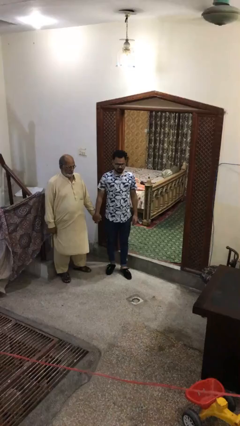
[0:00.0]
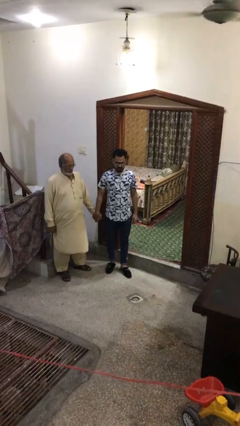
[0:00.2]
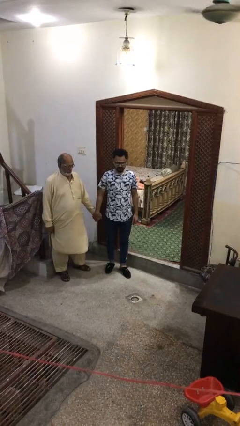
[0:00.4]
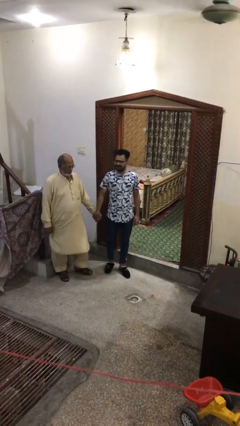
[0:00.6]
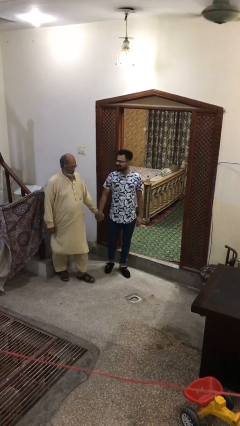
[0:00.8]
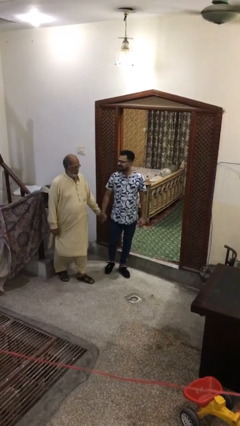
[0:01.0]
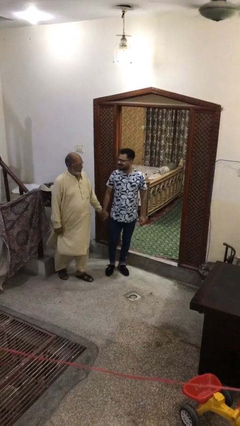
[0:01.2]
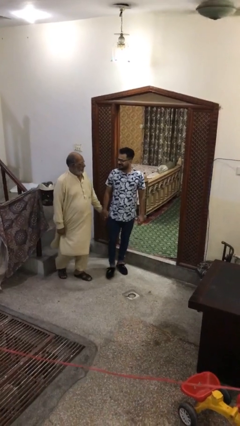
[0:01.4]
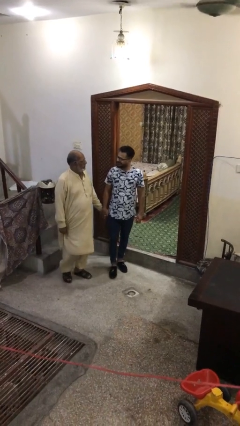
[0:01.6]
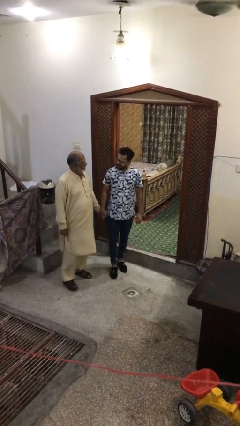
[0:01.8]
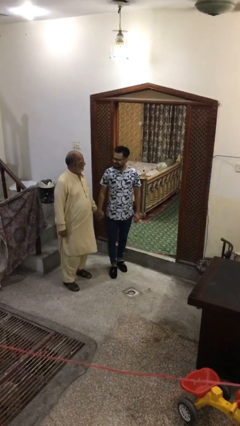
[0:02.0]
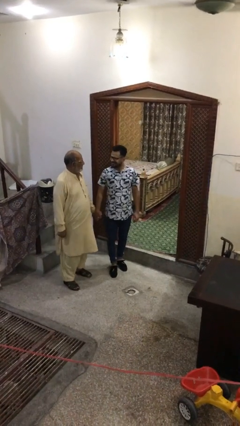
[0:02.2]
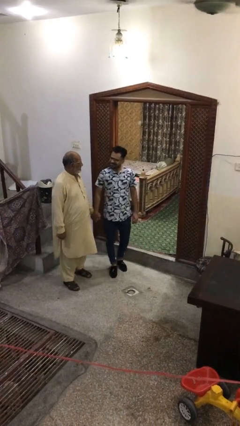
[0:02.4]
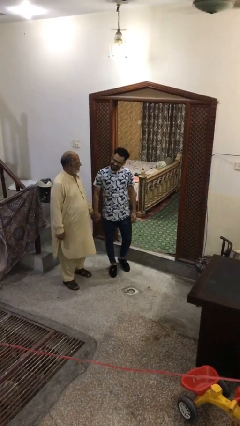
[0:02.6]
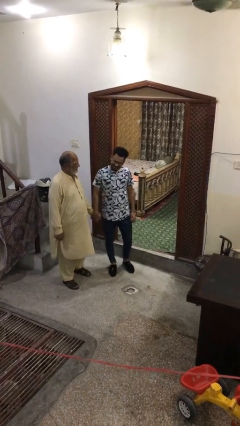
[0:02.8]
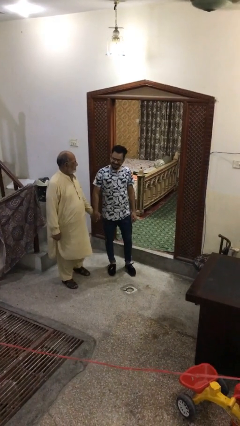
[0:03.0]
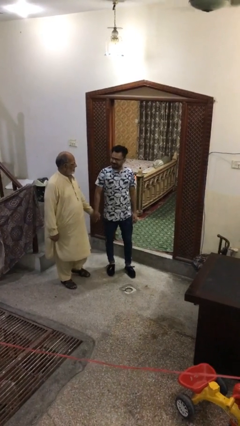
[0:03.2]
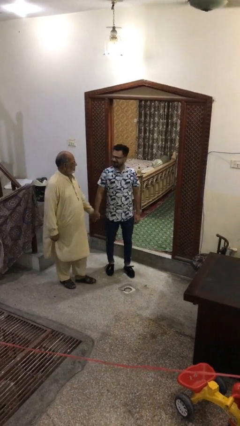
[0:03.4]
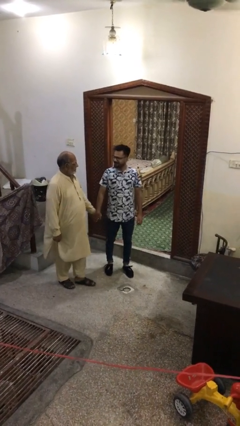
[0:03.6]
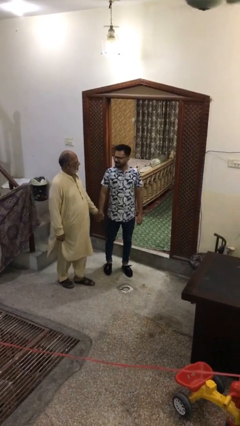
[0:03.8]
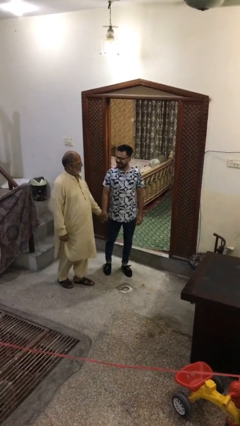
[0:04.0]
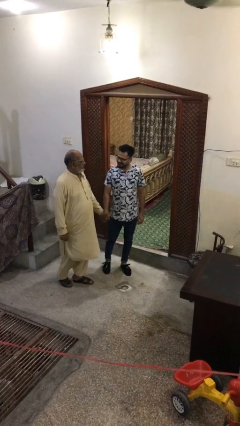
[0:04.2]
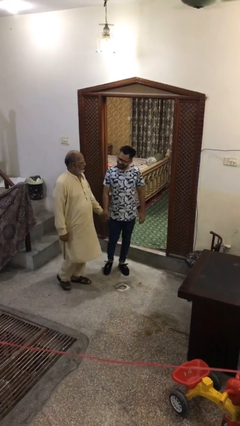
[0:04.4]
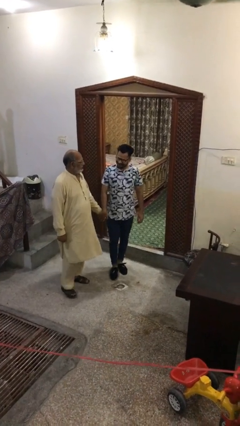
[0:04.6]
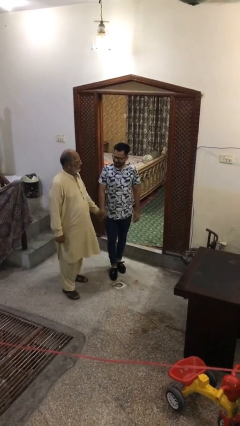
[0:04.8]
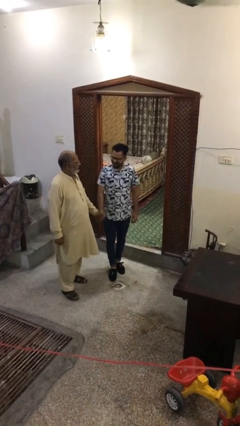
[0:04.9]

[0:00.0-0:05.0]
person holds hand

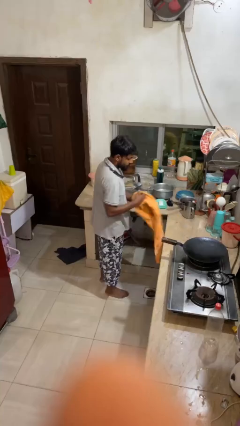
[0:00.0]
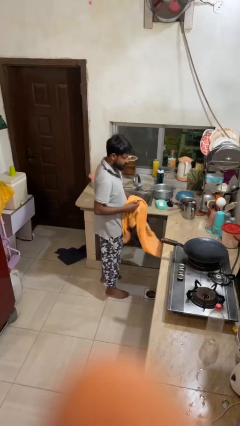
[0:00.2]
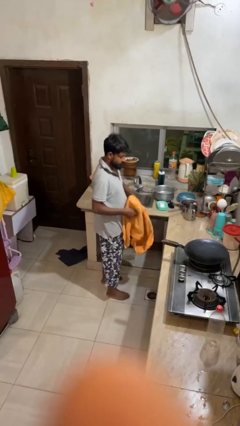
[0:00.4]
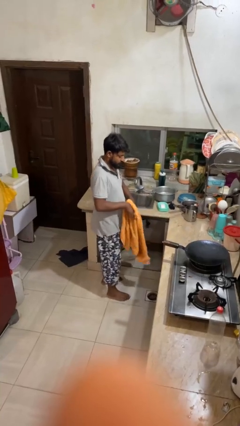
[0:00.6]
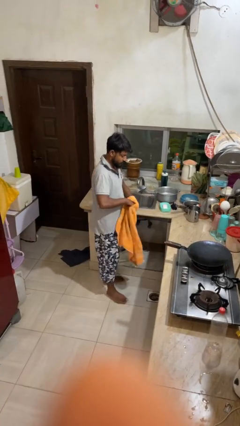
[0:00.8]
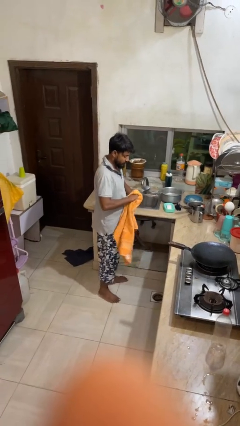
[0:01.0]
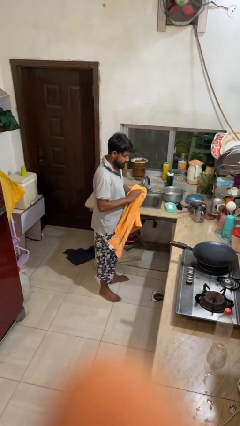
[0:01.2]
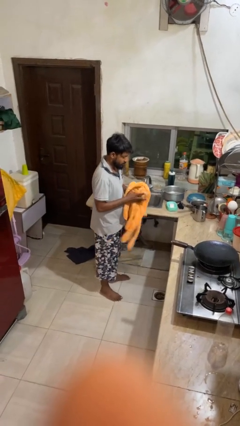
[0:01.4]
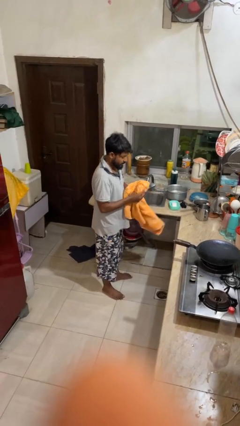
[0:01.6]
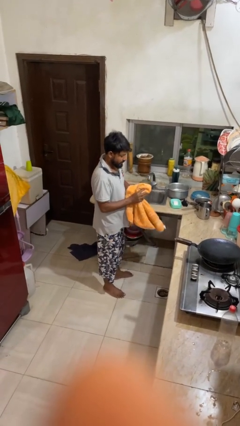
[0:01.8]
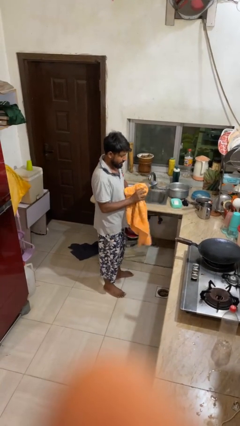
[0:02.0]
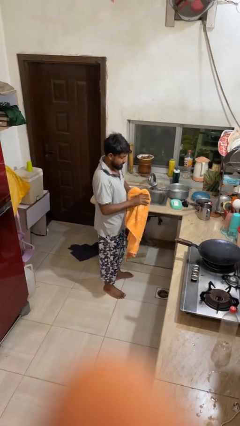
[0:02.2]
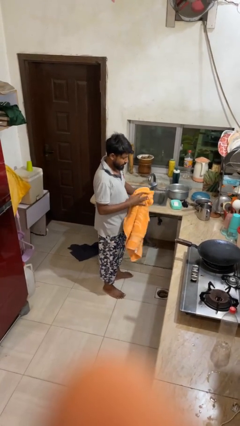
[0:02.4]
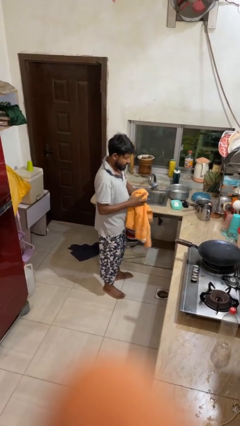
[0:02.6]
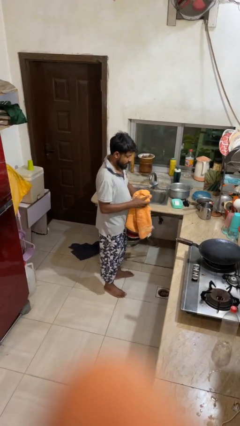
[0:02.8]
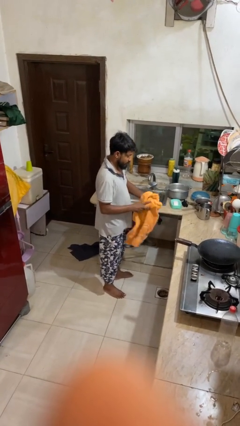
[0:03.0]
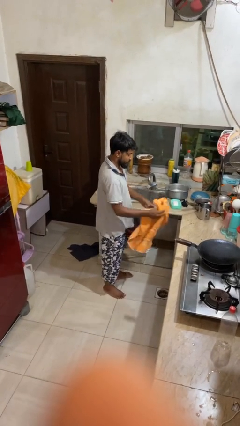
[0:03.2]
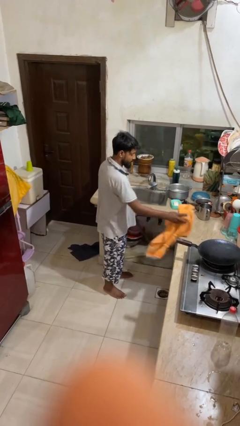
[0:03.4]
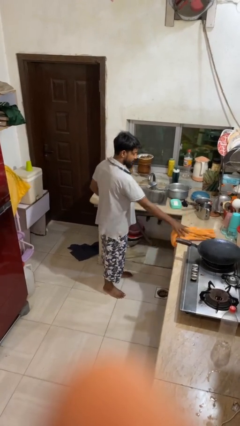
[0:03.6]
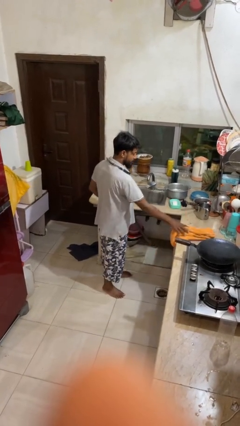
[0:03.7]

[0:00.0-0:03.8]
person dries hands with towel

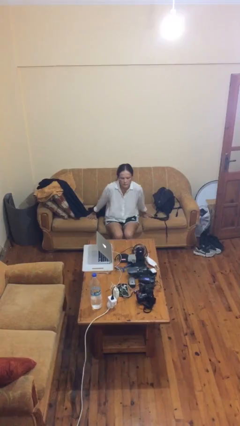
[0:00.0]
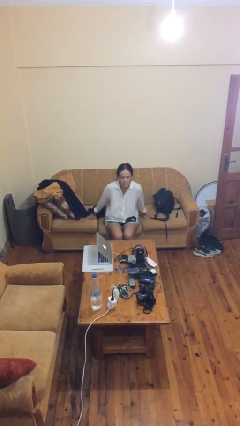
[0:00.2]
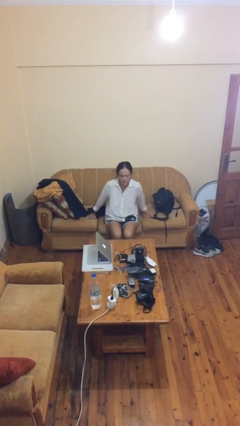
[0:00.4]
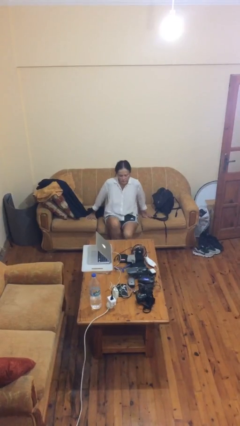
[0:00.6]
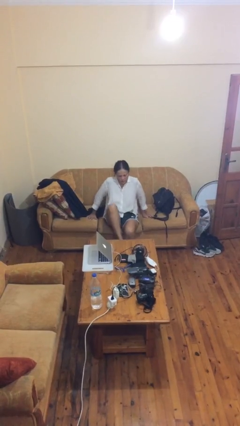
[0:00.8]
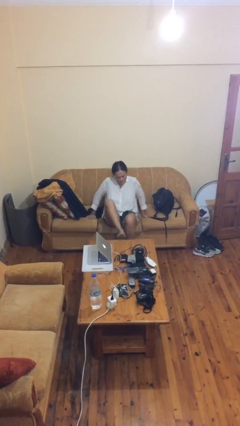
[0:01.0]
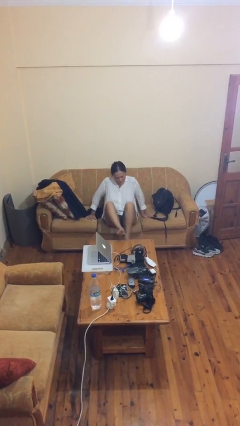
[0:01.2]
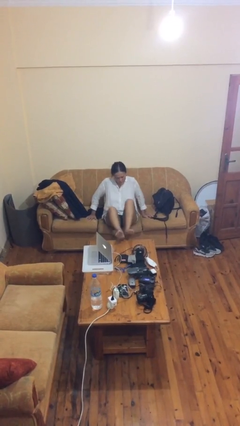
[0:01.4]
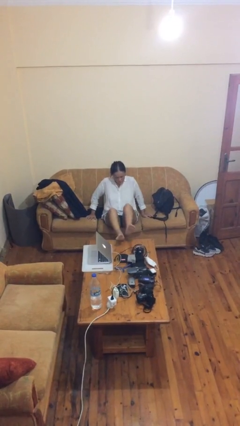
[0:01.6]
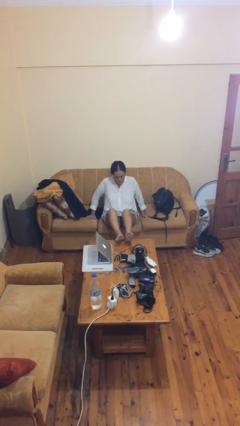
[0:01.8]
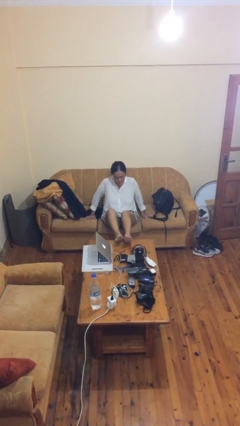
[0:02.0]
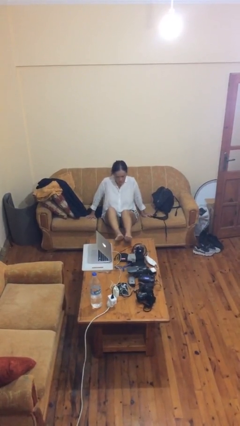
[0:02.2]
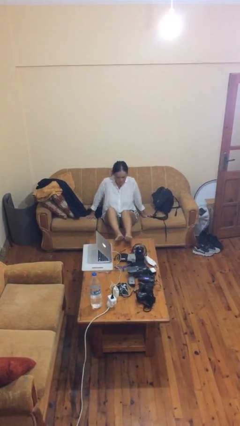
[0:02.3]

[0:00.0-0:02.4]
person puts feet up

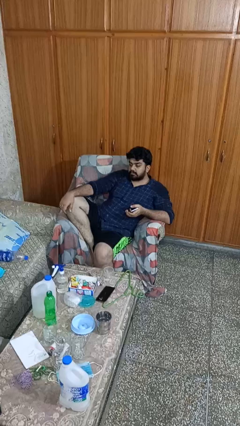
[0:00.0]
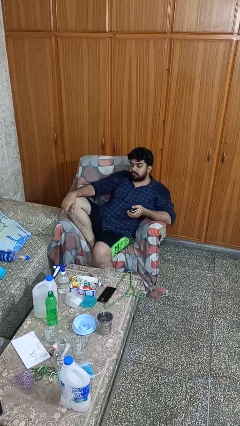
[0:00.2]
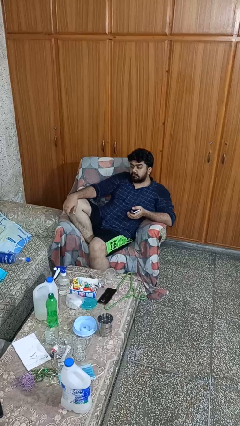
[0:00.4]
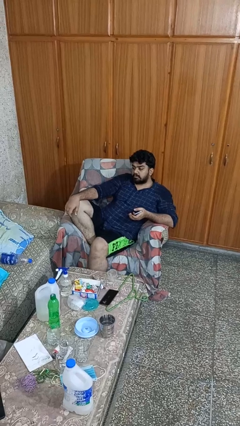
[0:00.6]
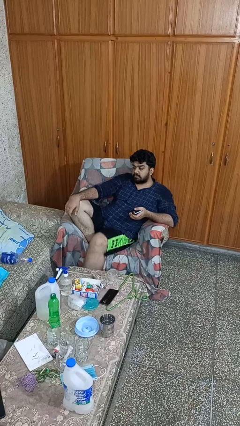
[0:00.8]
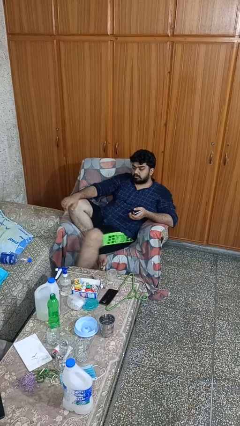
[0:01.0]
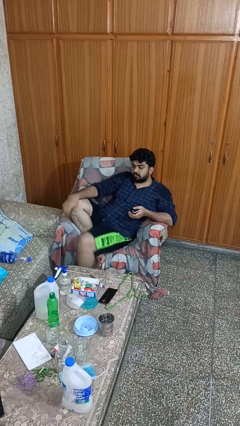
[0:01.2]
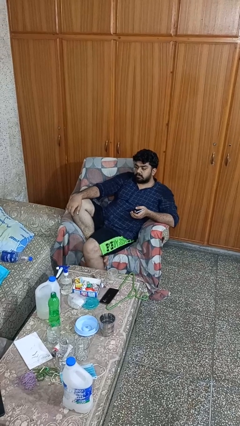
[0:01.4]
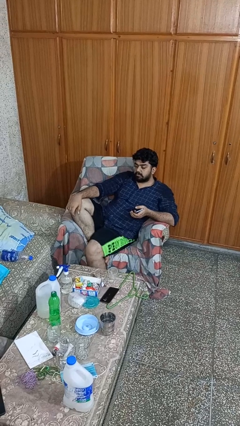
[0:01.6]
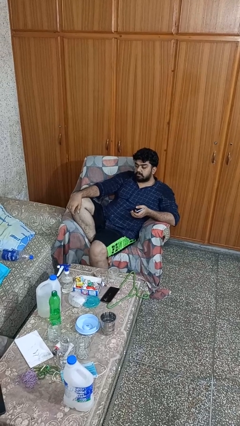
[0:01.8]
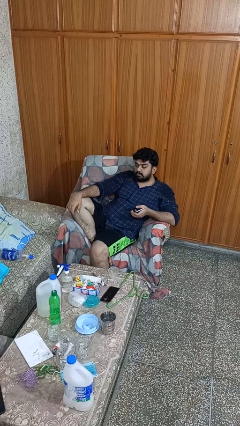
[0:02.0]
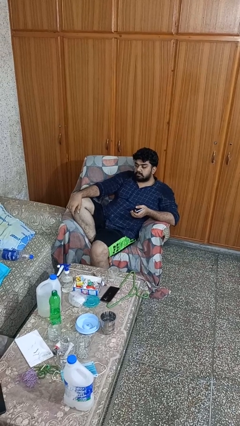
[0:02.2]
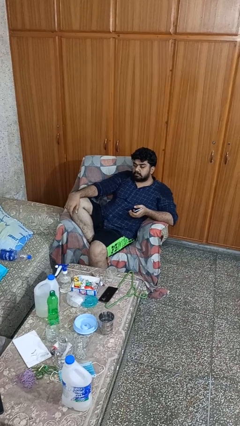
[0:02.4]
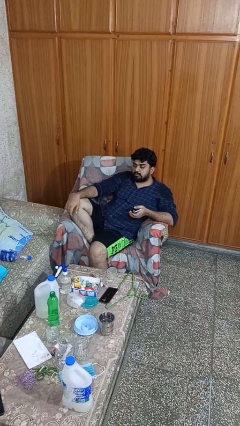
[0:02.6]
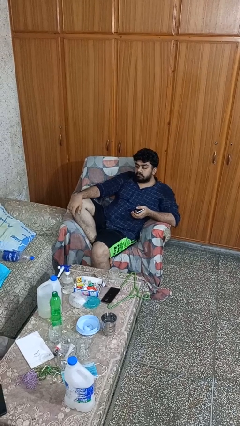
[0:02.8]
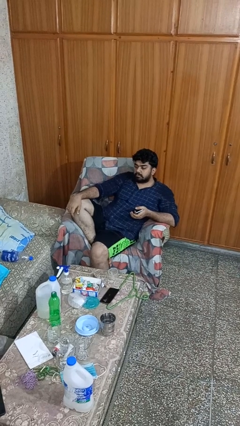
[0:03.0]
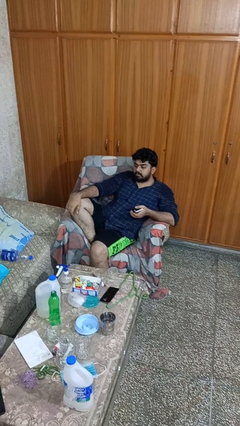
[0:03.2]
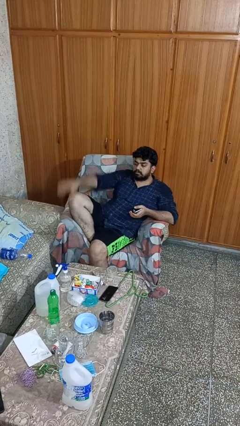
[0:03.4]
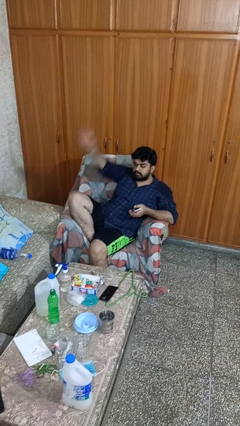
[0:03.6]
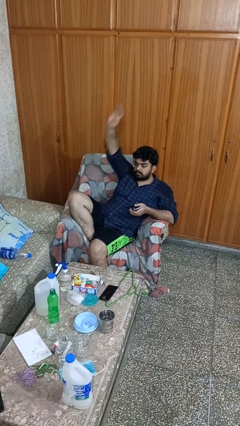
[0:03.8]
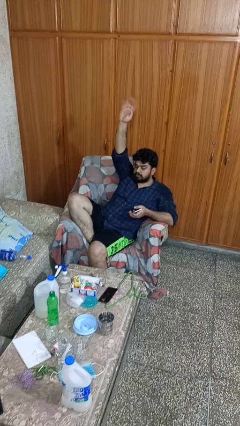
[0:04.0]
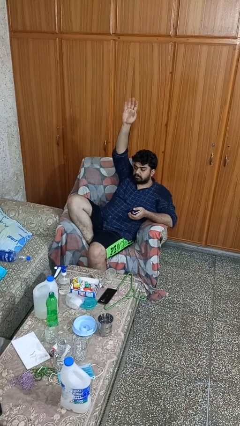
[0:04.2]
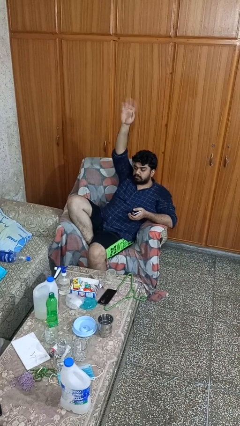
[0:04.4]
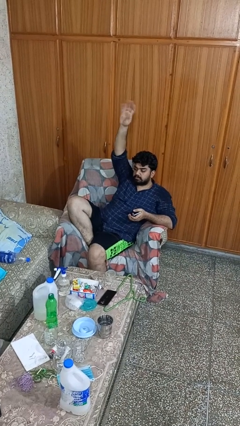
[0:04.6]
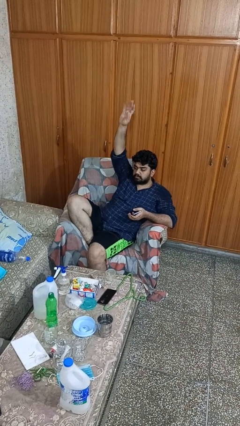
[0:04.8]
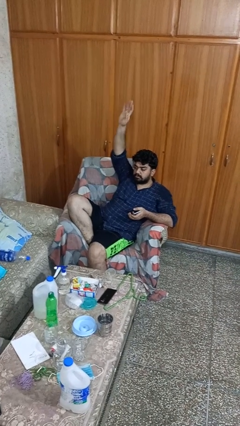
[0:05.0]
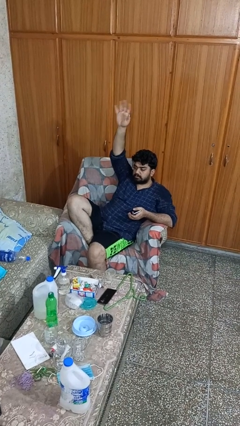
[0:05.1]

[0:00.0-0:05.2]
person waves at person

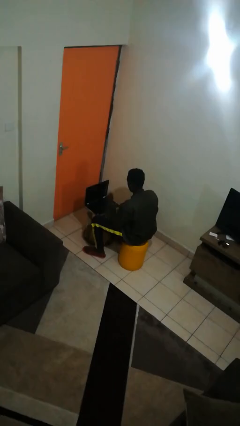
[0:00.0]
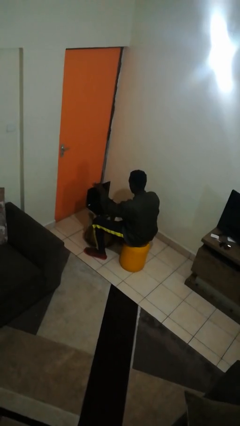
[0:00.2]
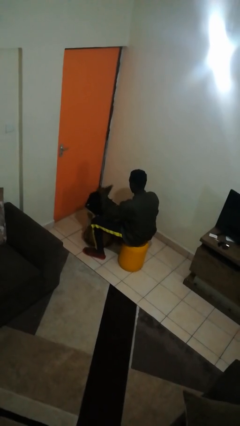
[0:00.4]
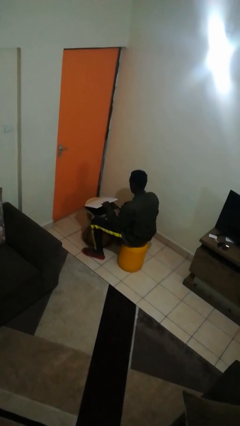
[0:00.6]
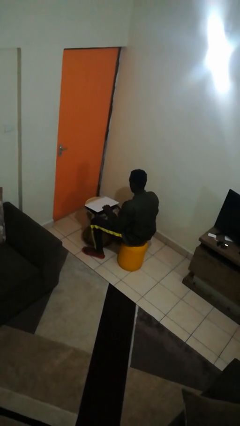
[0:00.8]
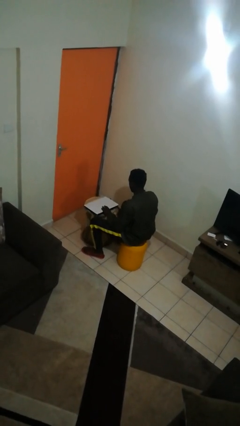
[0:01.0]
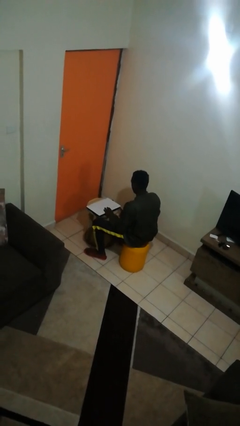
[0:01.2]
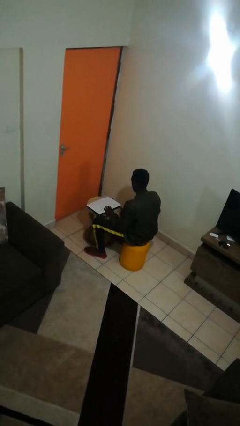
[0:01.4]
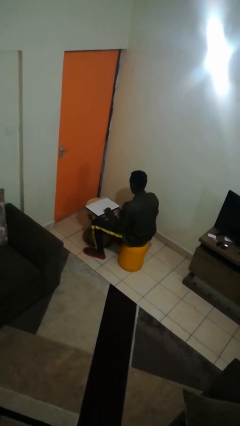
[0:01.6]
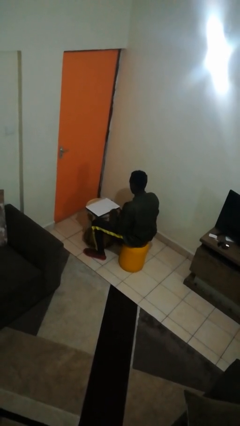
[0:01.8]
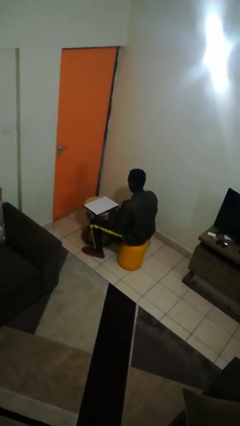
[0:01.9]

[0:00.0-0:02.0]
person closes laptop
